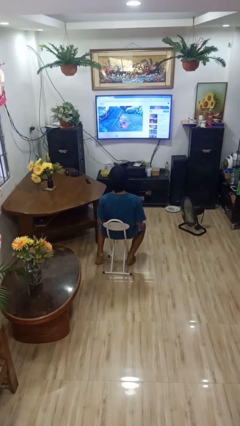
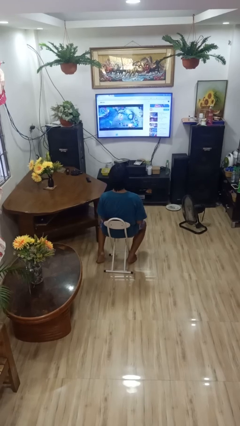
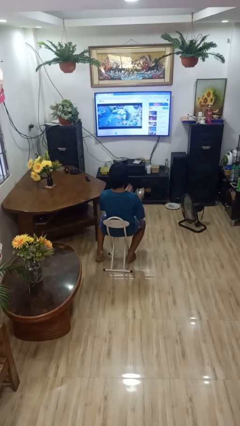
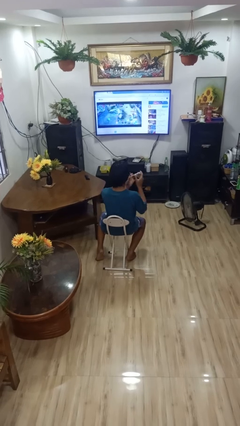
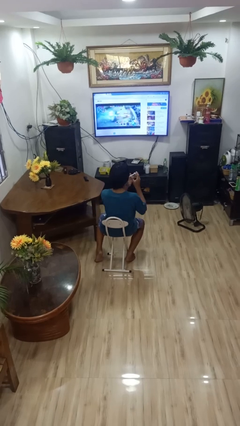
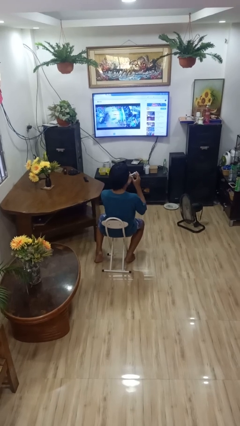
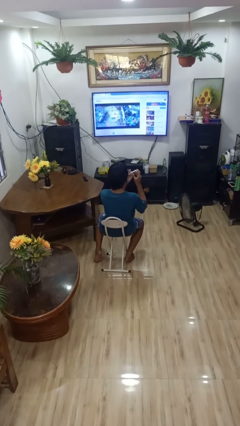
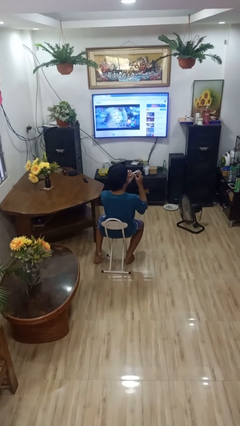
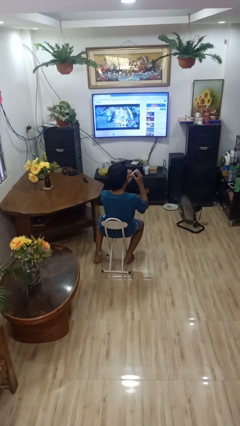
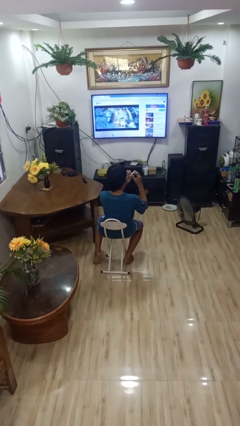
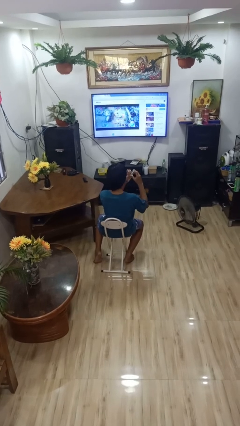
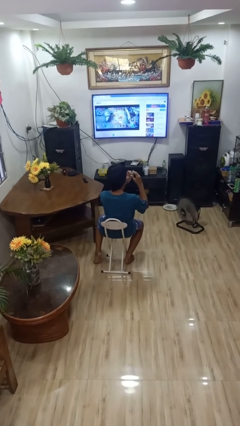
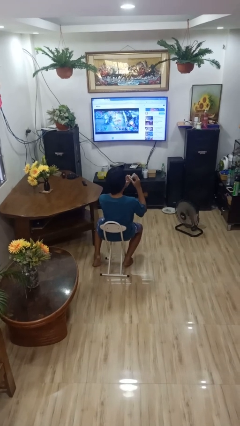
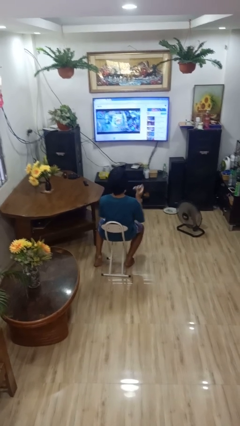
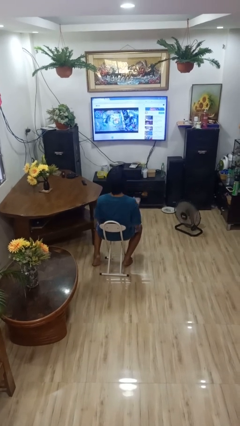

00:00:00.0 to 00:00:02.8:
person clips fingernails

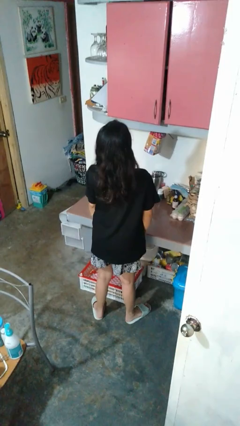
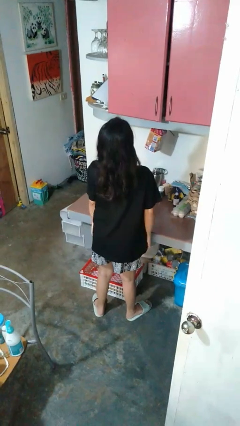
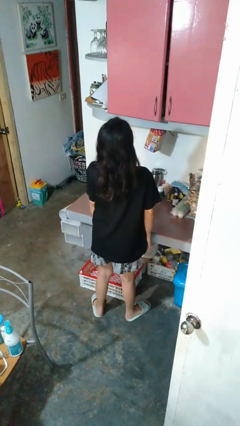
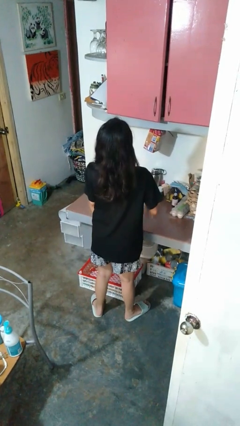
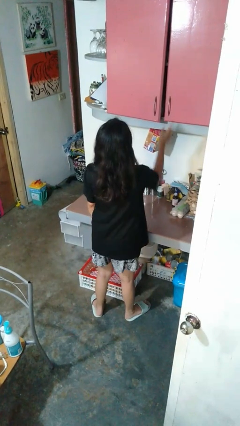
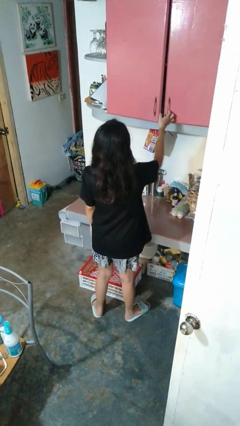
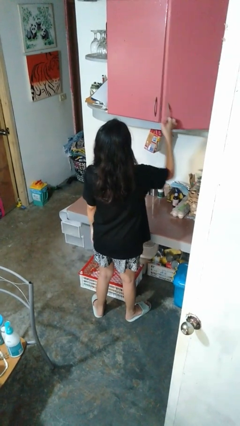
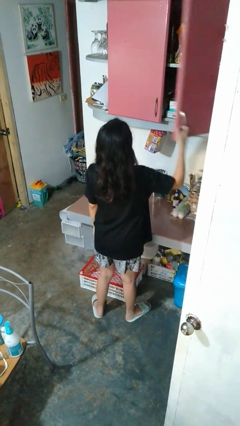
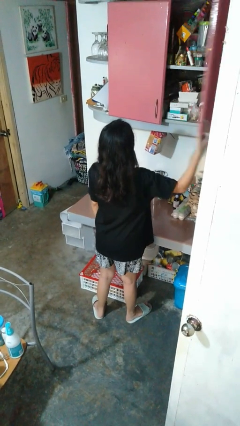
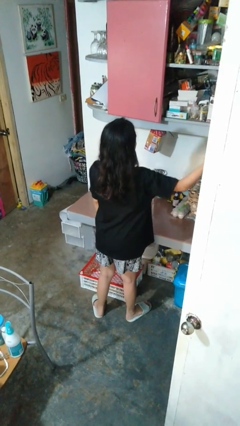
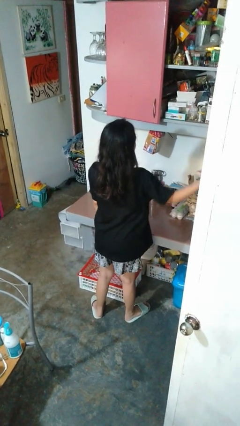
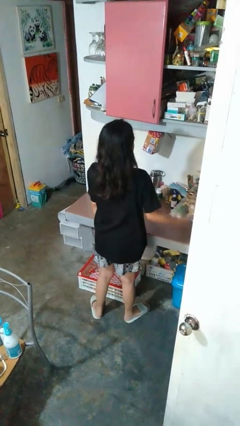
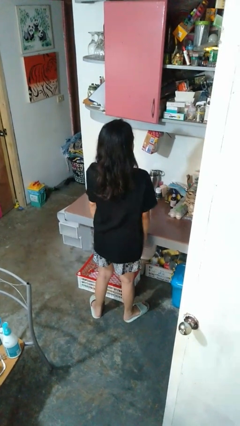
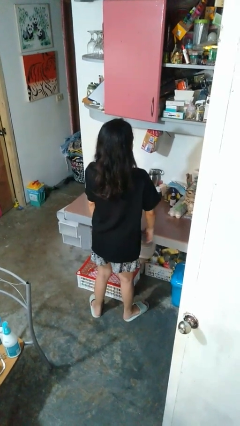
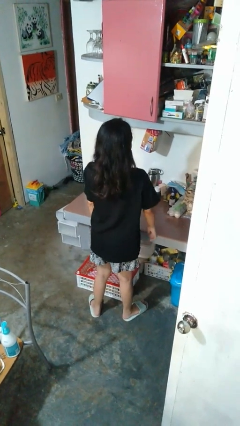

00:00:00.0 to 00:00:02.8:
person opens cabinet

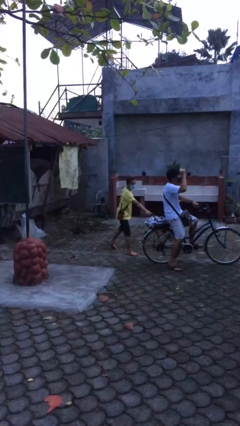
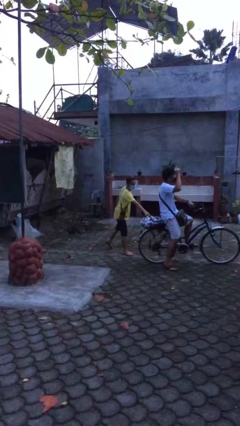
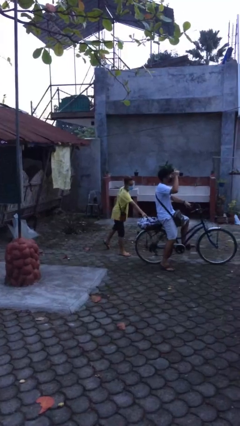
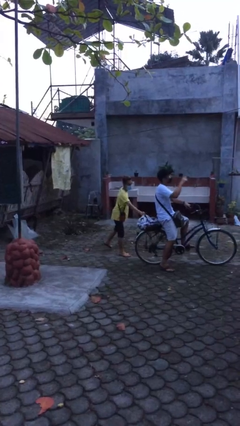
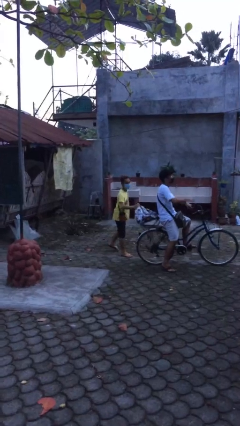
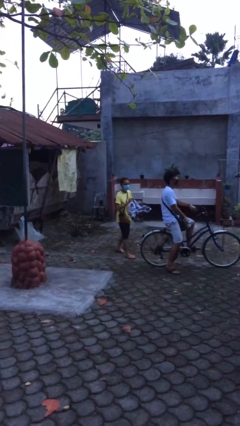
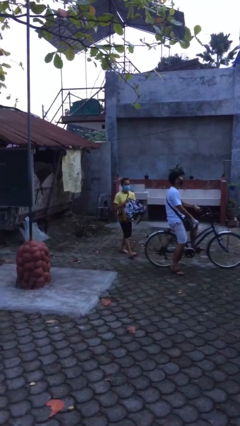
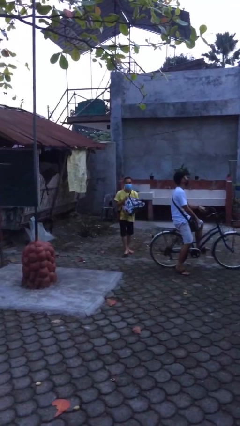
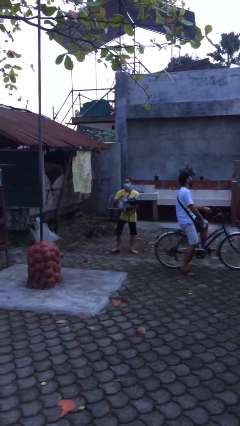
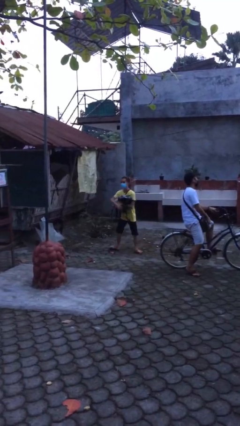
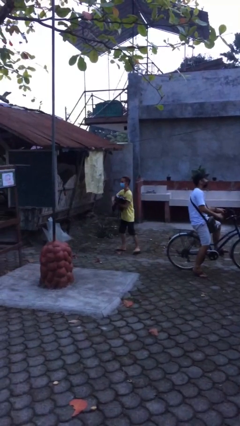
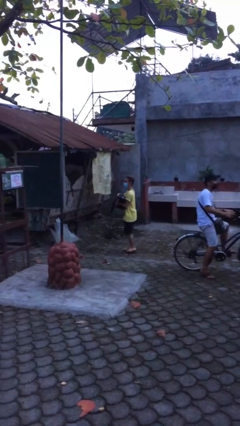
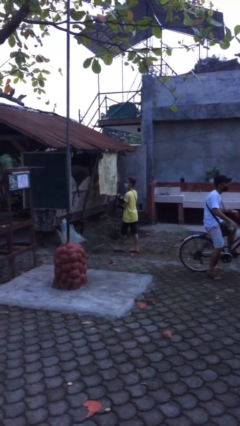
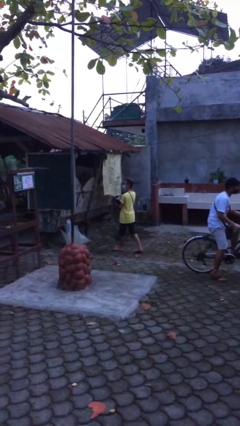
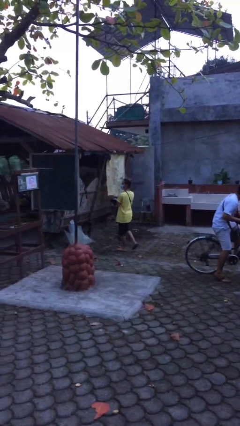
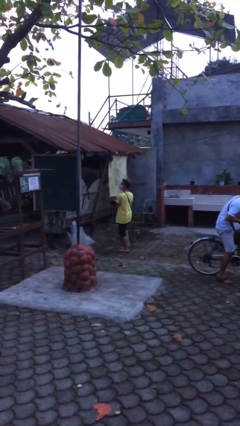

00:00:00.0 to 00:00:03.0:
person steals object from person

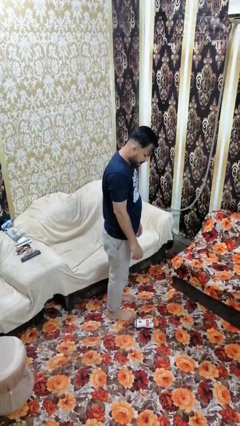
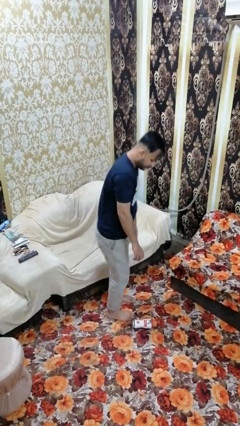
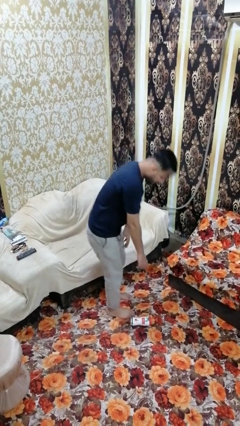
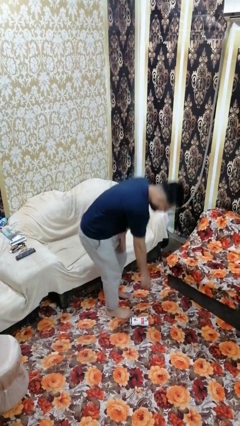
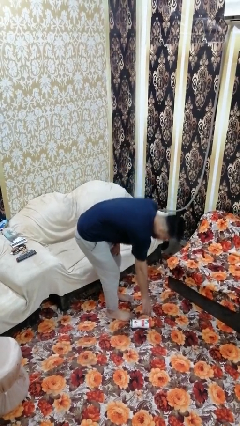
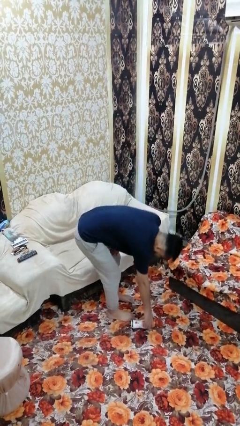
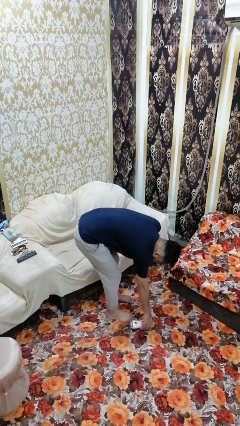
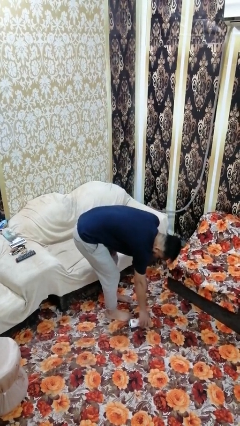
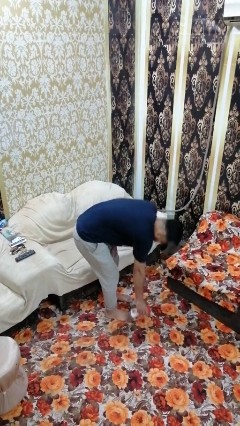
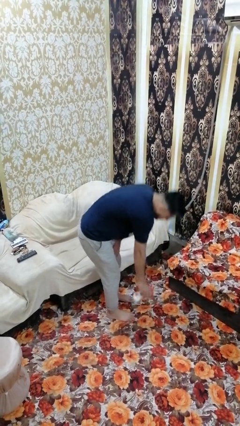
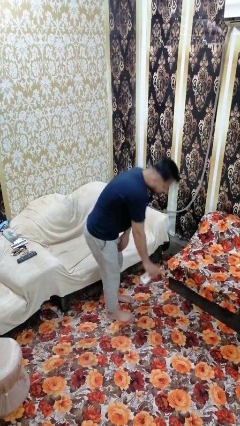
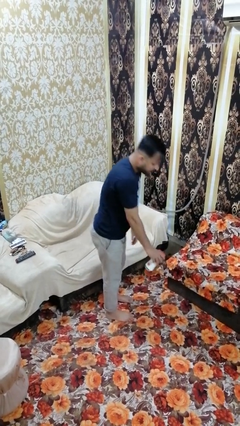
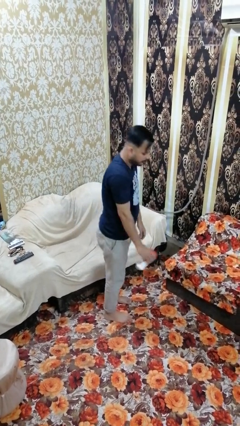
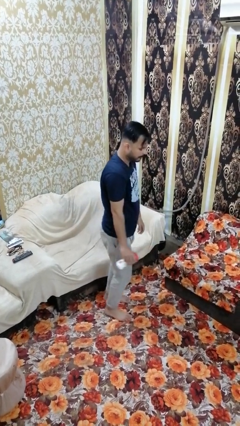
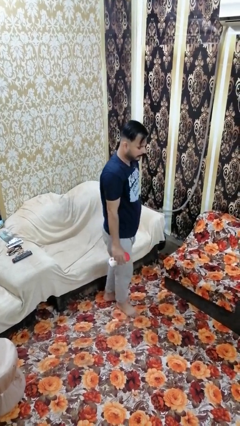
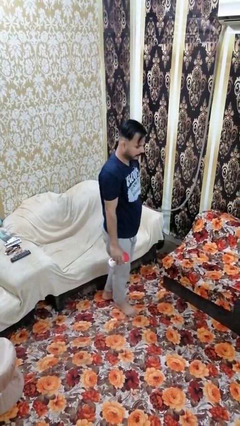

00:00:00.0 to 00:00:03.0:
person picks up object from floor

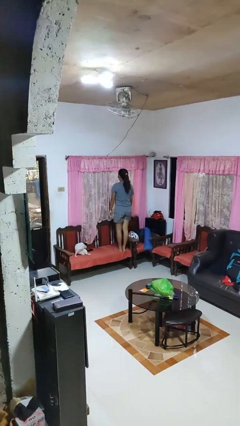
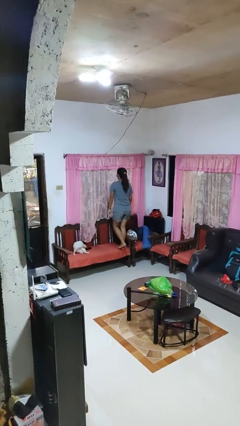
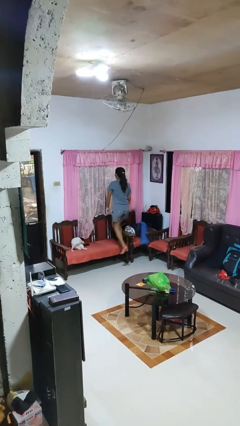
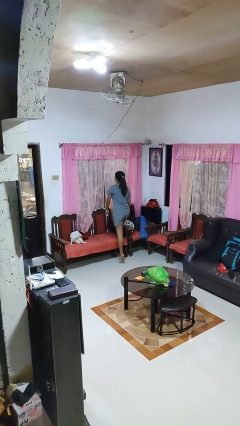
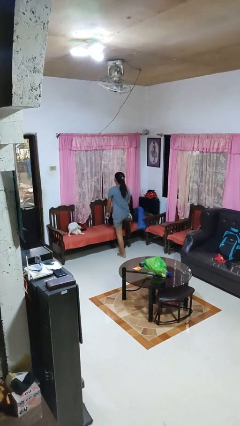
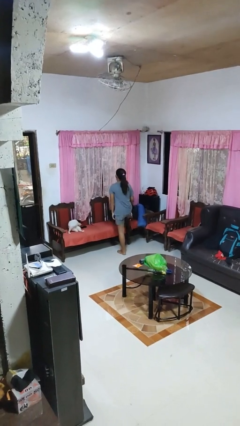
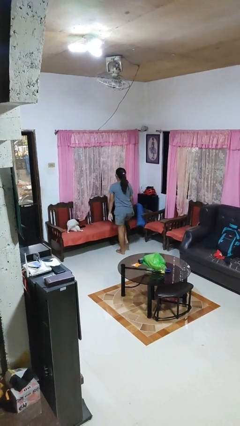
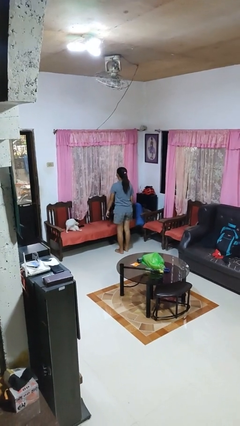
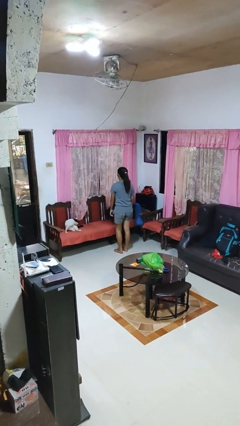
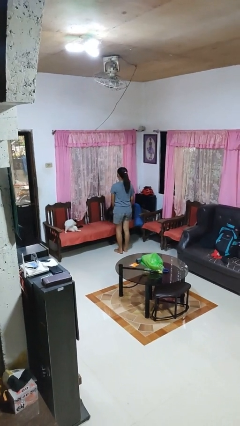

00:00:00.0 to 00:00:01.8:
person climbs off chair

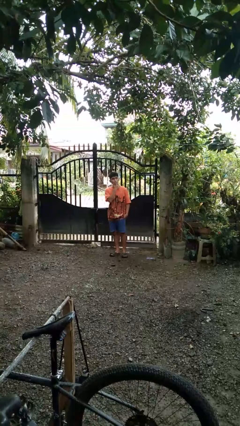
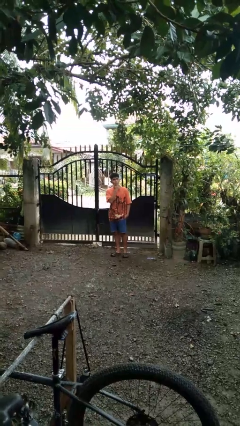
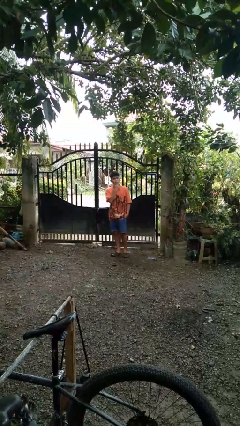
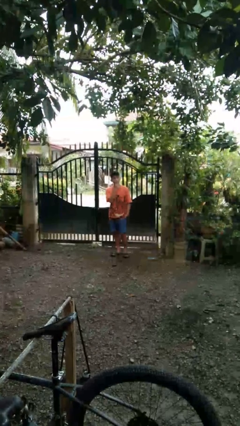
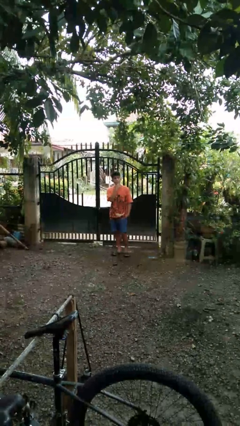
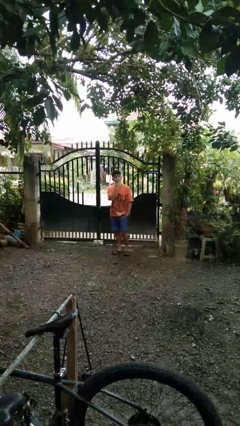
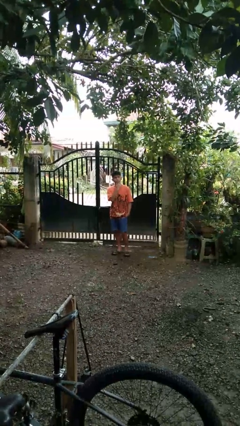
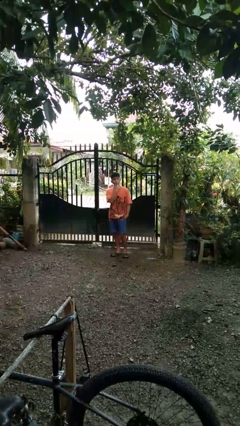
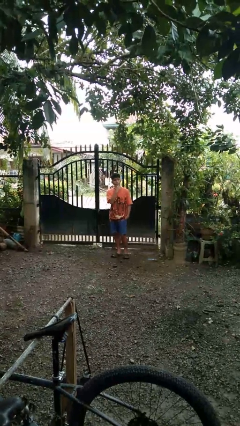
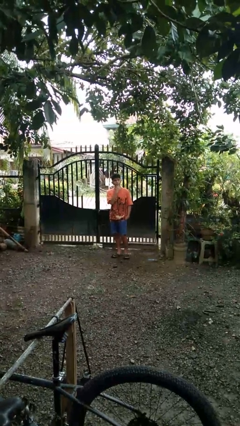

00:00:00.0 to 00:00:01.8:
person strokes chin

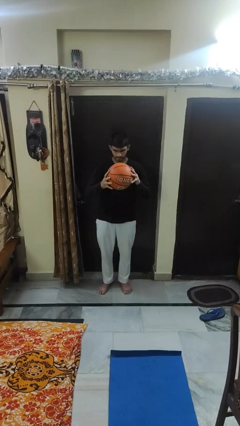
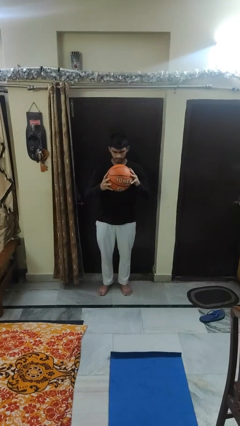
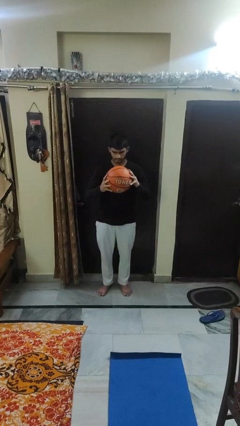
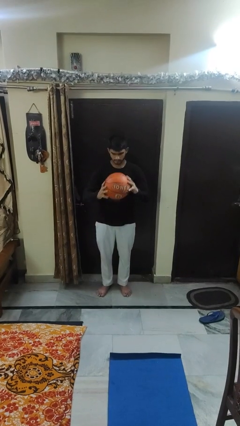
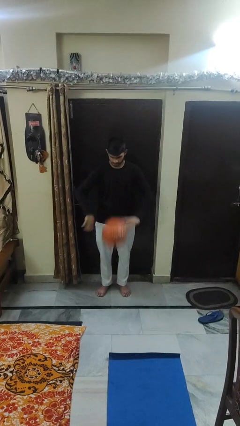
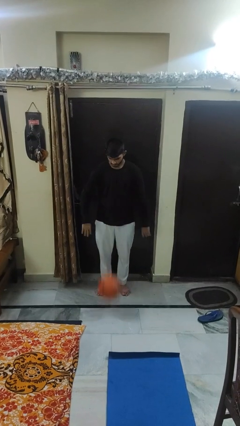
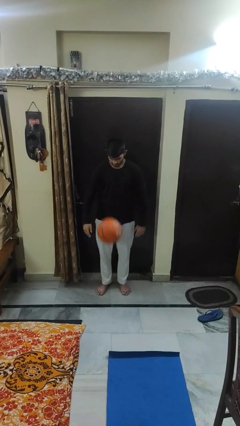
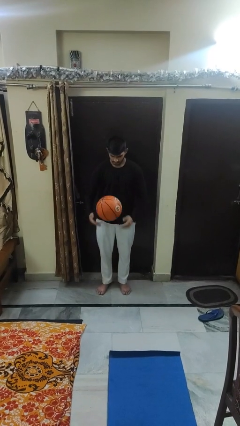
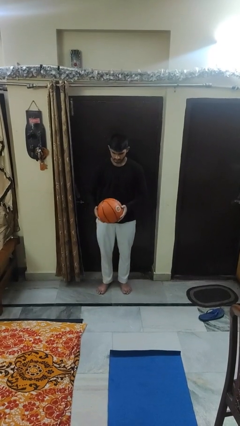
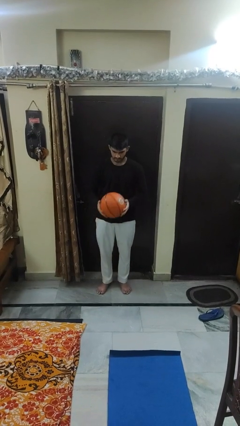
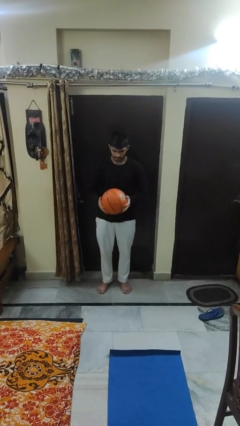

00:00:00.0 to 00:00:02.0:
person bounces ball on floor
